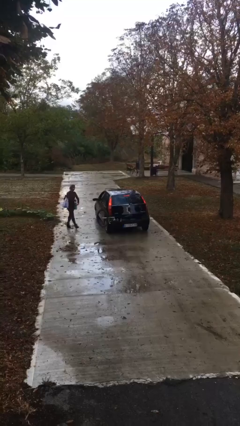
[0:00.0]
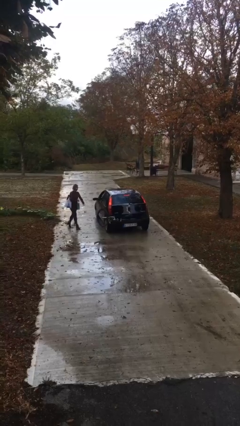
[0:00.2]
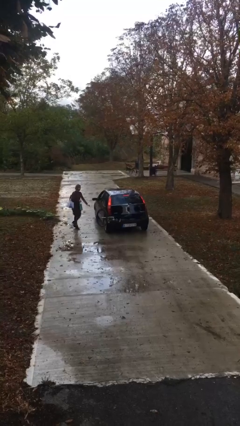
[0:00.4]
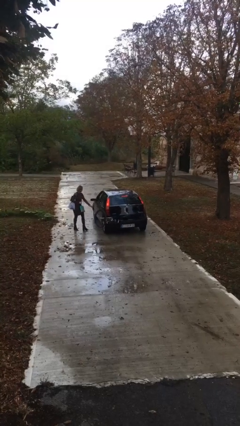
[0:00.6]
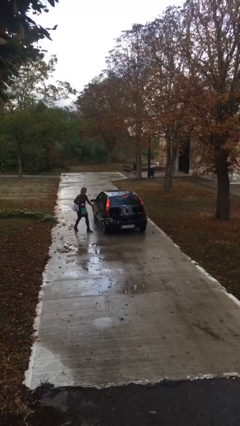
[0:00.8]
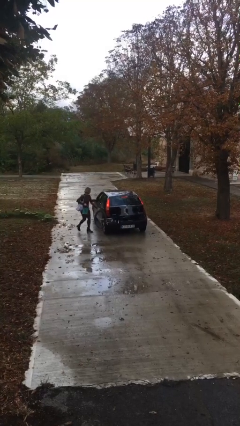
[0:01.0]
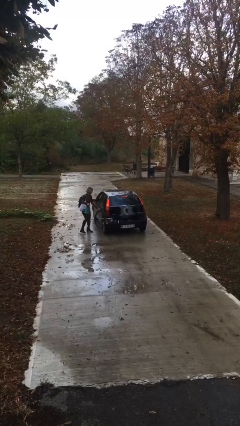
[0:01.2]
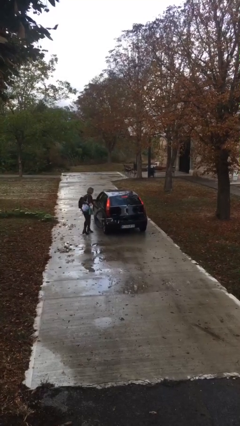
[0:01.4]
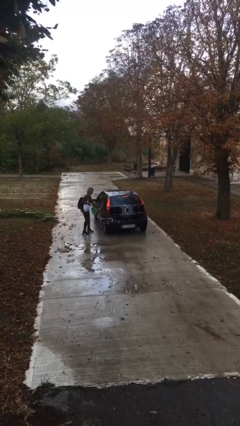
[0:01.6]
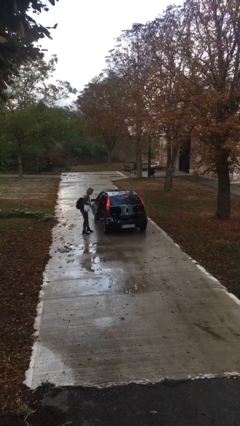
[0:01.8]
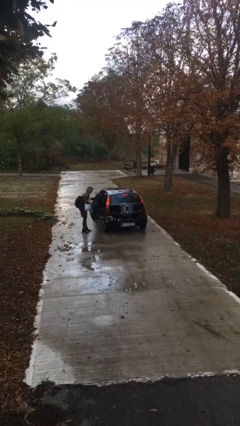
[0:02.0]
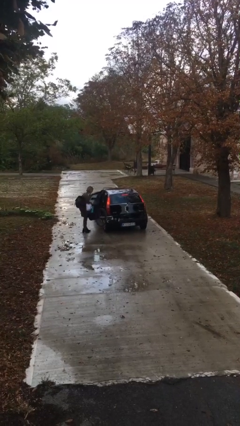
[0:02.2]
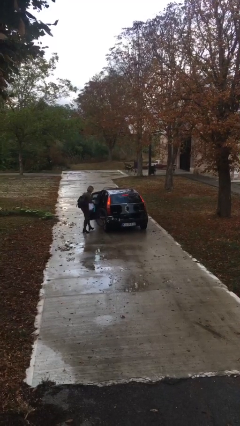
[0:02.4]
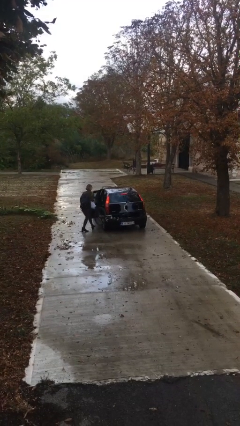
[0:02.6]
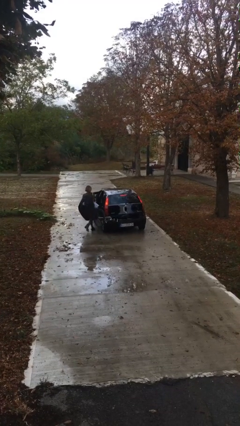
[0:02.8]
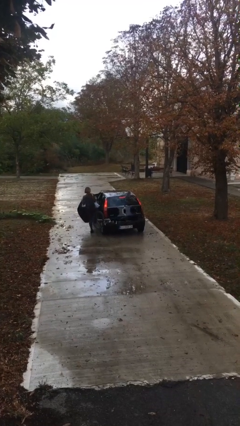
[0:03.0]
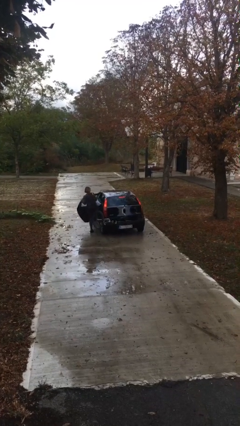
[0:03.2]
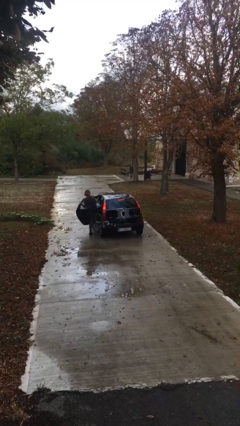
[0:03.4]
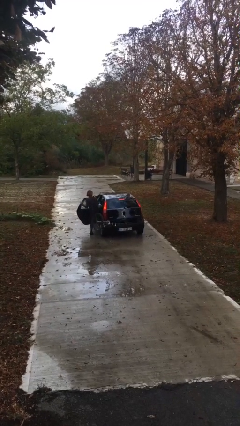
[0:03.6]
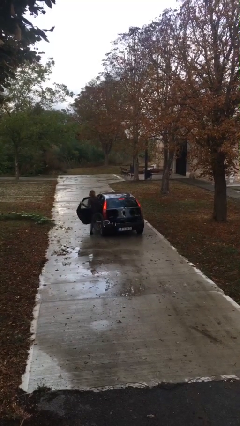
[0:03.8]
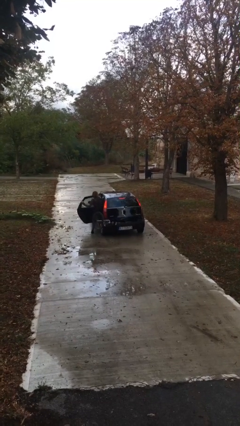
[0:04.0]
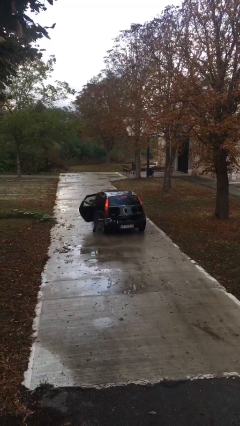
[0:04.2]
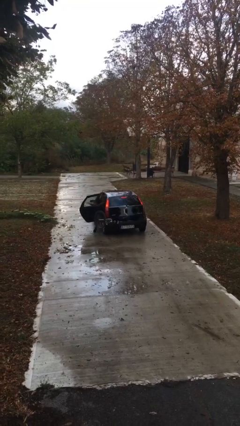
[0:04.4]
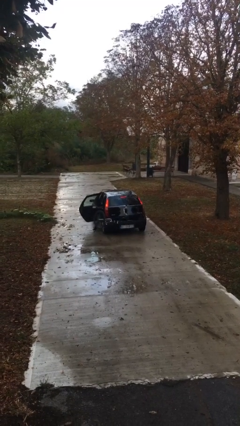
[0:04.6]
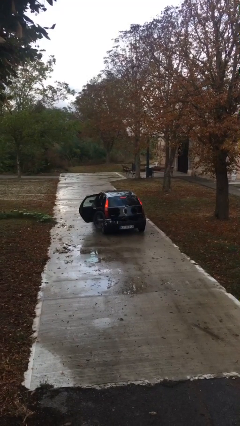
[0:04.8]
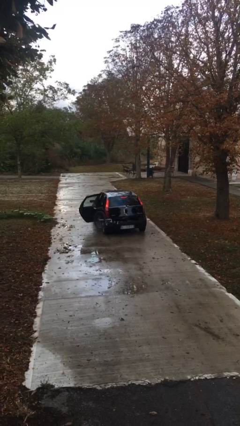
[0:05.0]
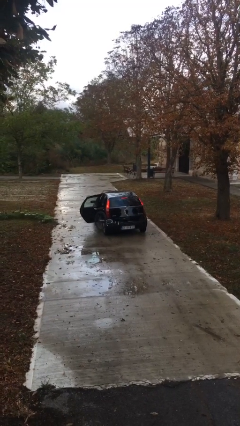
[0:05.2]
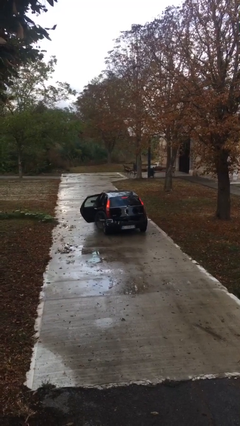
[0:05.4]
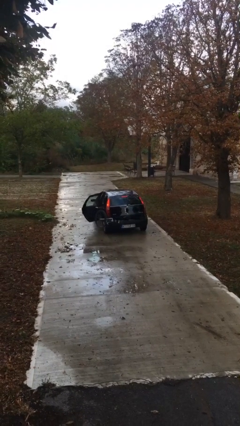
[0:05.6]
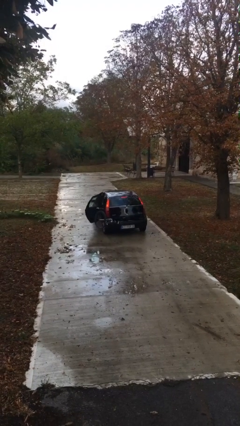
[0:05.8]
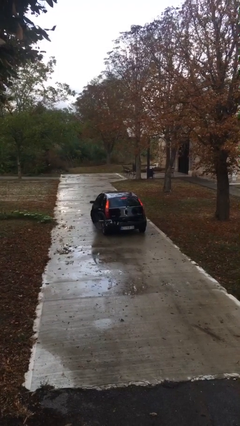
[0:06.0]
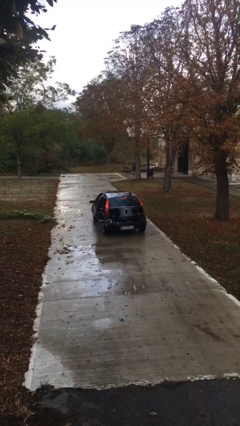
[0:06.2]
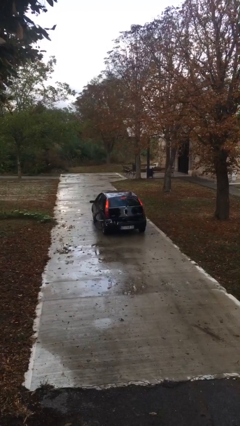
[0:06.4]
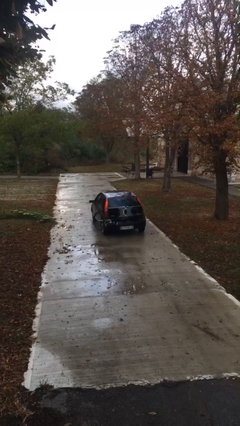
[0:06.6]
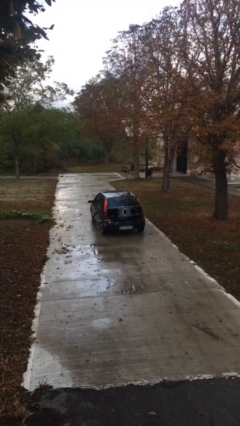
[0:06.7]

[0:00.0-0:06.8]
car picks up person

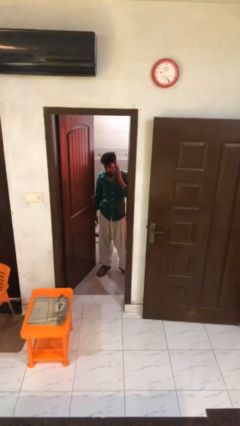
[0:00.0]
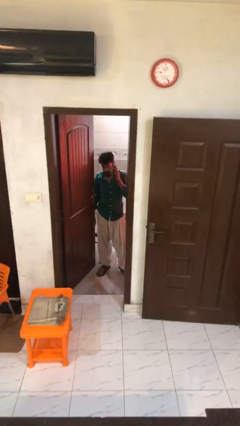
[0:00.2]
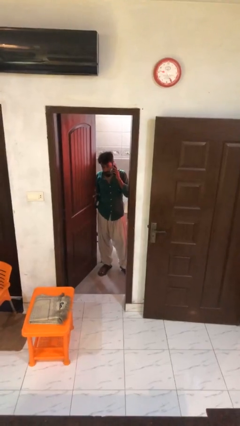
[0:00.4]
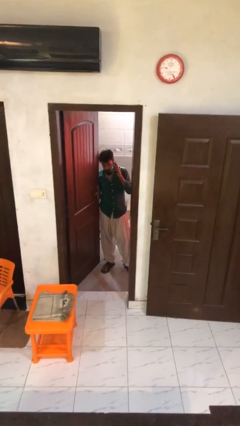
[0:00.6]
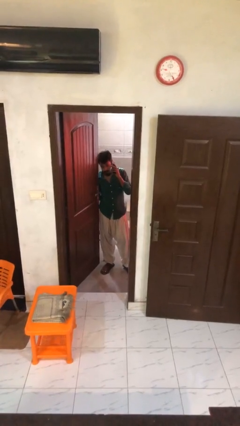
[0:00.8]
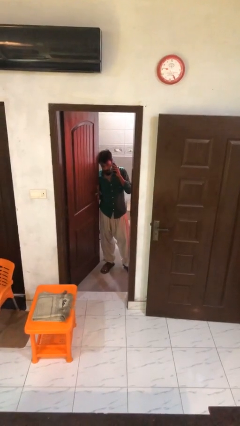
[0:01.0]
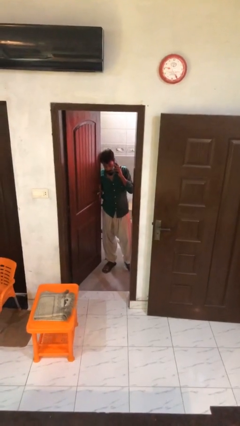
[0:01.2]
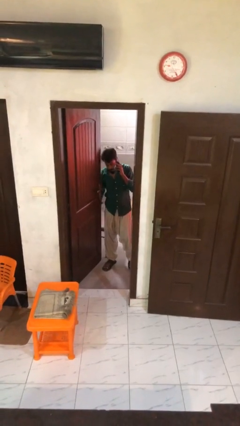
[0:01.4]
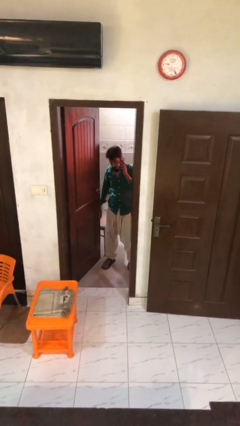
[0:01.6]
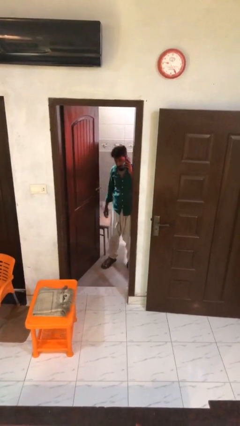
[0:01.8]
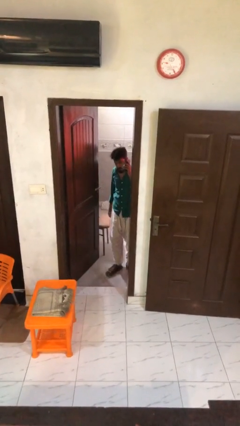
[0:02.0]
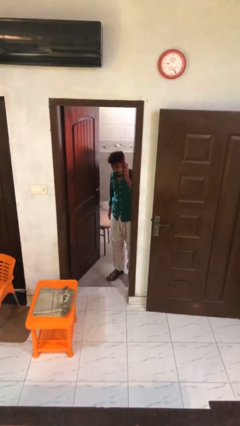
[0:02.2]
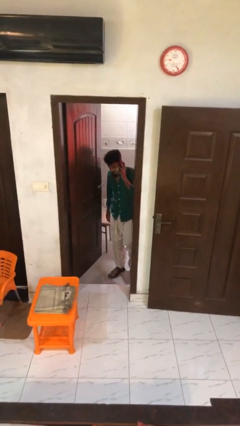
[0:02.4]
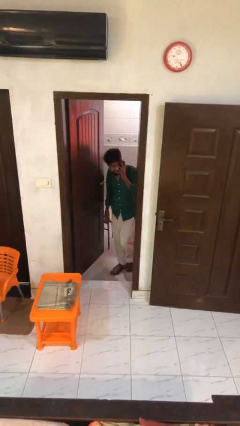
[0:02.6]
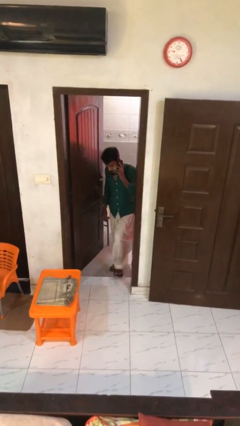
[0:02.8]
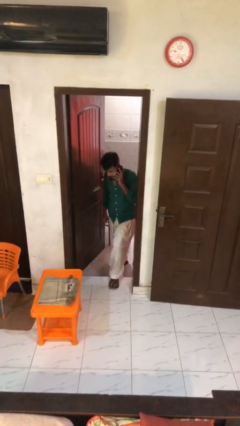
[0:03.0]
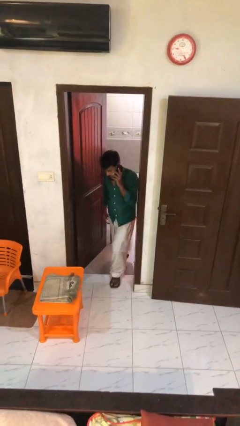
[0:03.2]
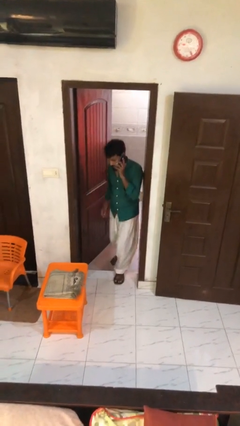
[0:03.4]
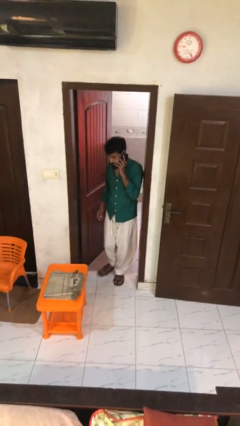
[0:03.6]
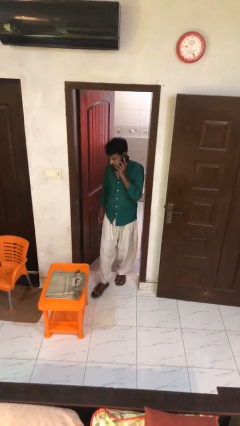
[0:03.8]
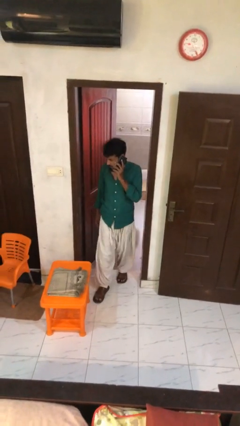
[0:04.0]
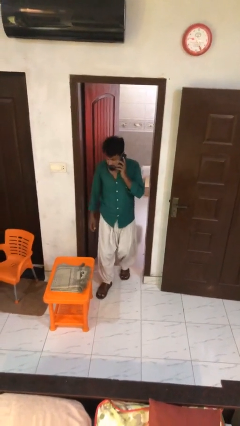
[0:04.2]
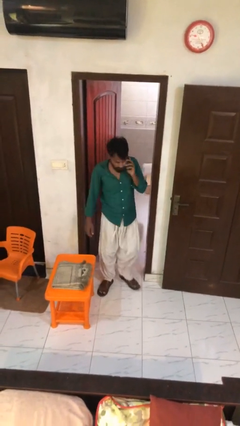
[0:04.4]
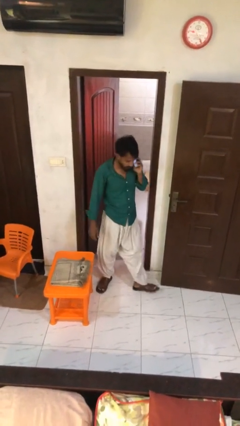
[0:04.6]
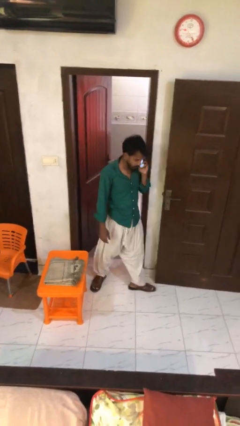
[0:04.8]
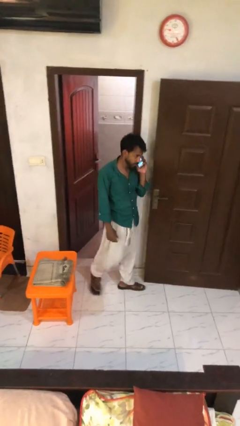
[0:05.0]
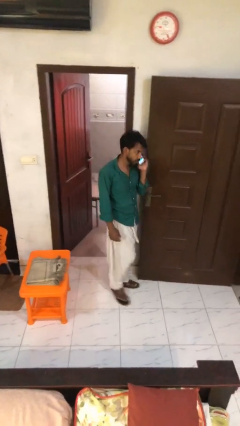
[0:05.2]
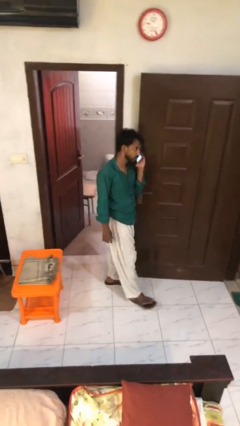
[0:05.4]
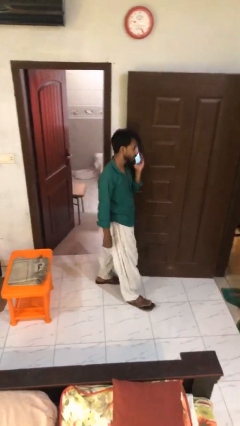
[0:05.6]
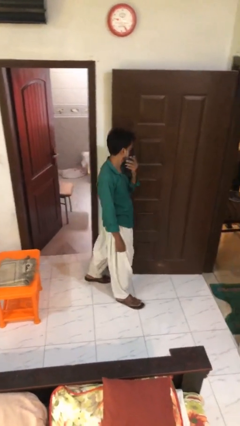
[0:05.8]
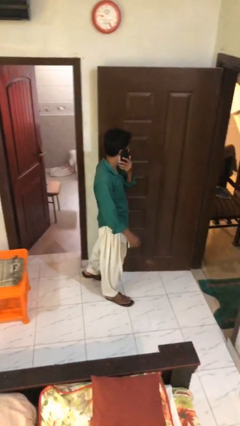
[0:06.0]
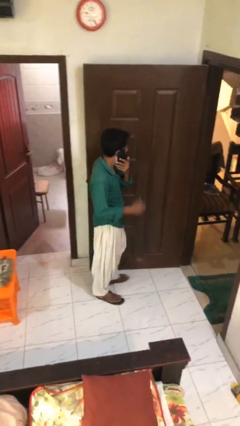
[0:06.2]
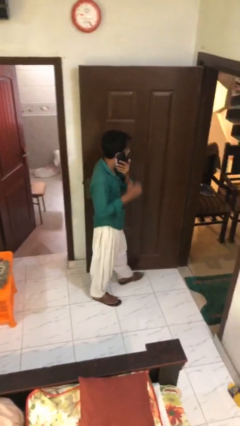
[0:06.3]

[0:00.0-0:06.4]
person enters scene through structure

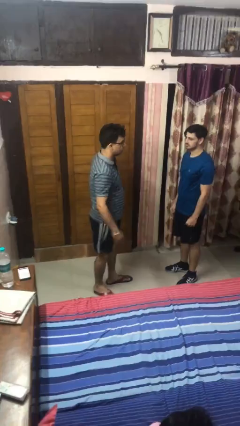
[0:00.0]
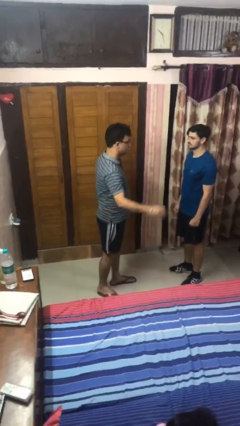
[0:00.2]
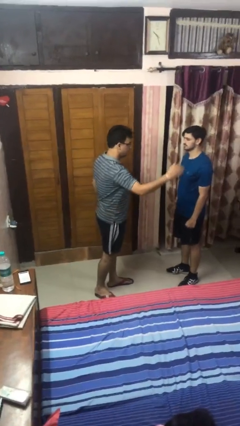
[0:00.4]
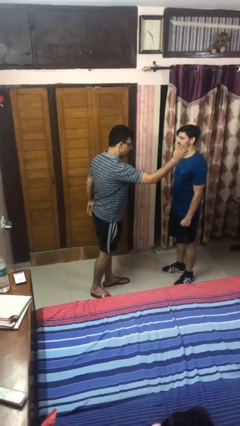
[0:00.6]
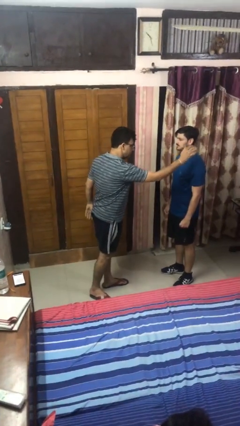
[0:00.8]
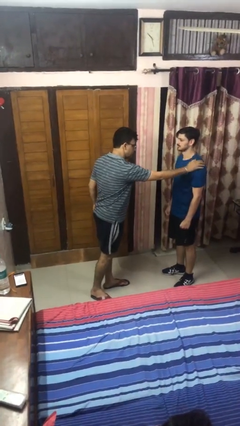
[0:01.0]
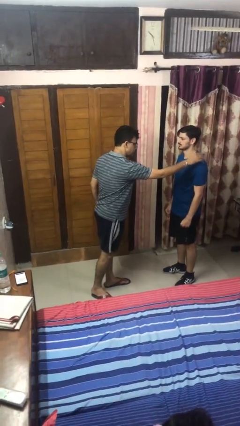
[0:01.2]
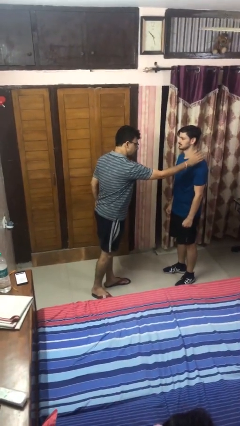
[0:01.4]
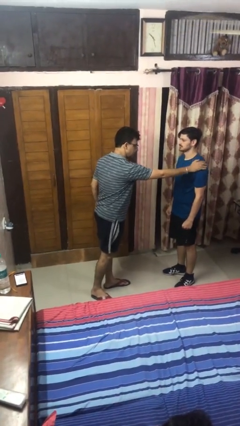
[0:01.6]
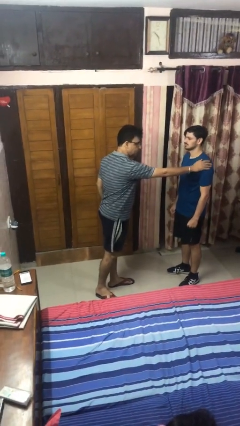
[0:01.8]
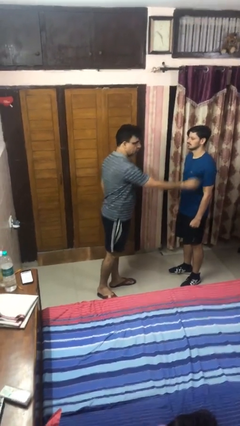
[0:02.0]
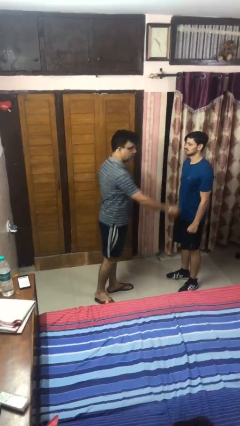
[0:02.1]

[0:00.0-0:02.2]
person pounds shoulders of person

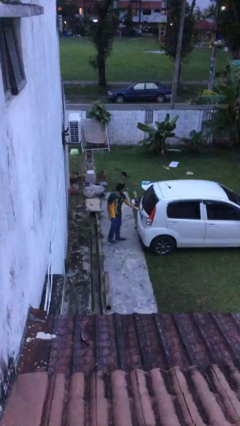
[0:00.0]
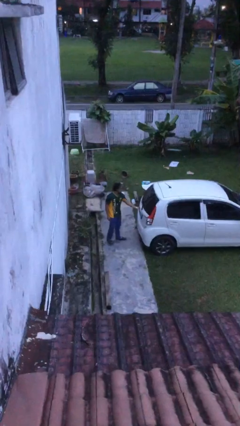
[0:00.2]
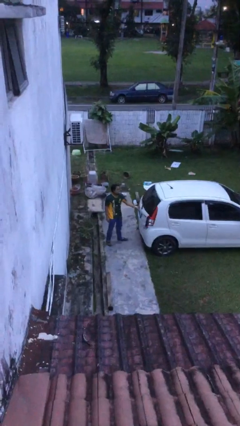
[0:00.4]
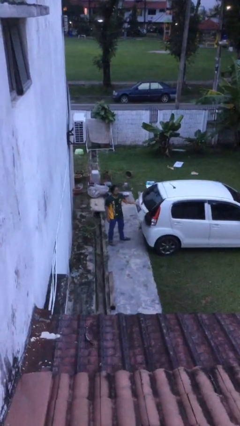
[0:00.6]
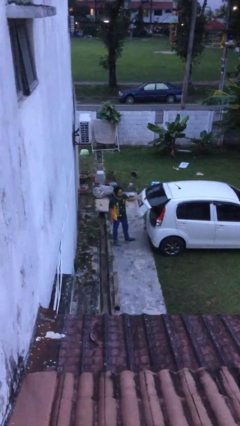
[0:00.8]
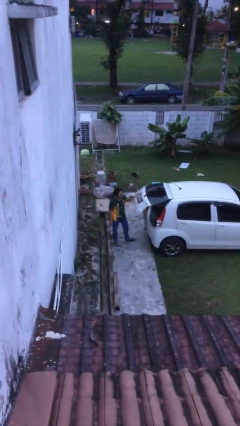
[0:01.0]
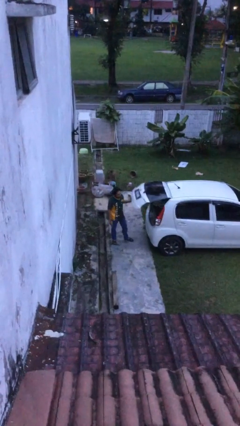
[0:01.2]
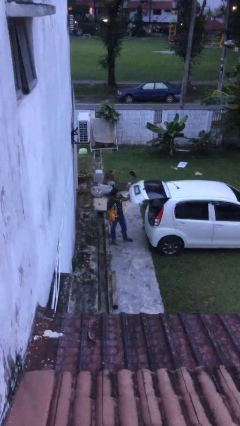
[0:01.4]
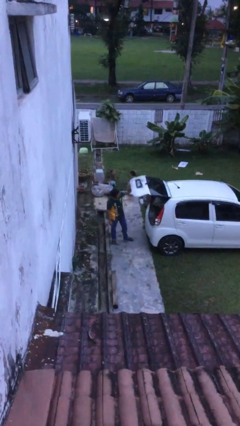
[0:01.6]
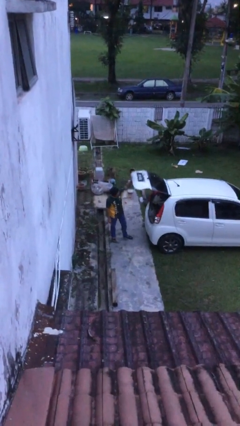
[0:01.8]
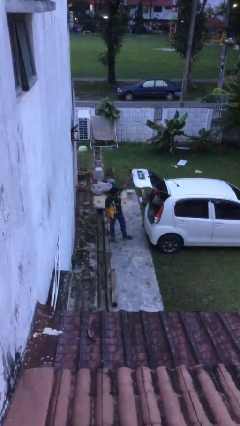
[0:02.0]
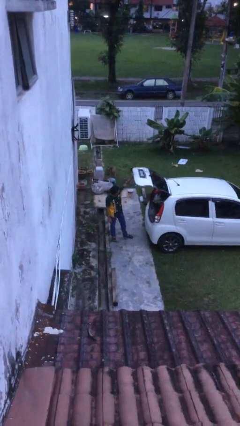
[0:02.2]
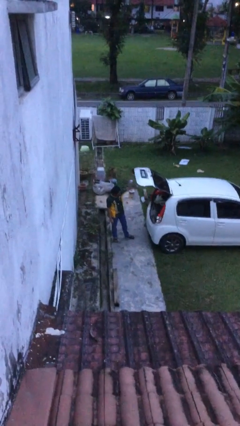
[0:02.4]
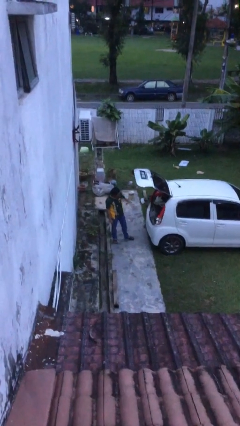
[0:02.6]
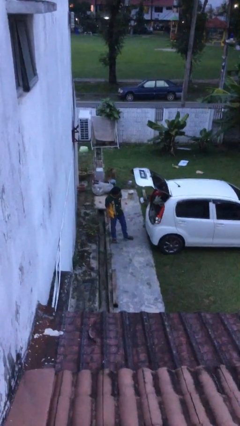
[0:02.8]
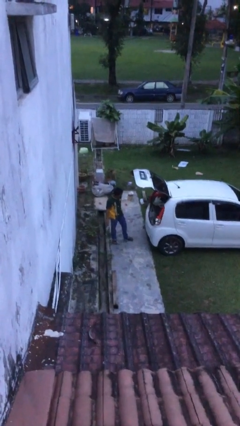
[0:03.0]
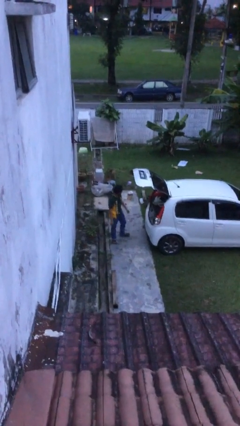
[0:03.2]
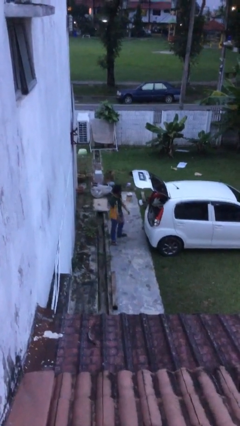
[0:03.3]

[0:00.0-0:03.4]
person opens car trunk
